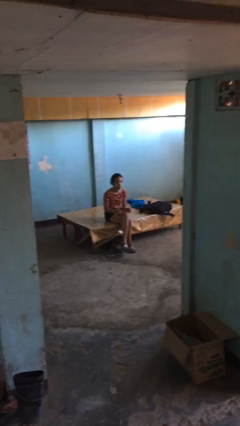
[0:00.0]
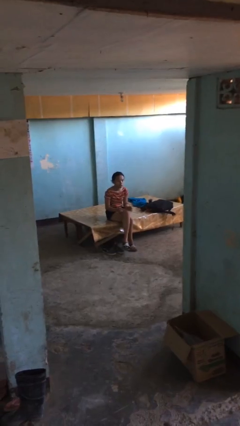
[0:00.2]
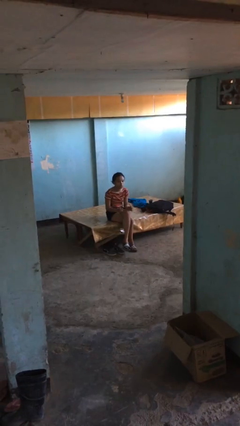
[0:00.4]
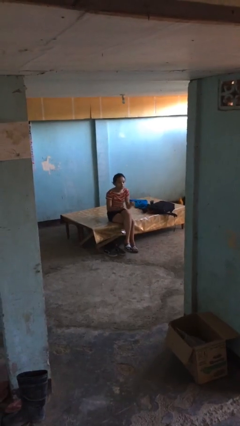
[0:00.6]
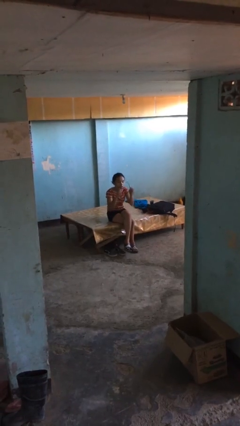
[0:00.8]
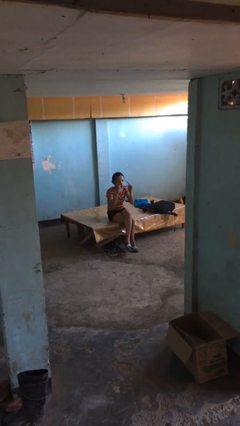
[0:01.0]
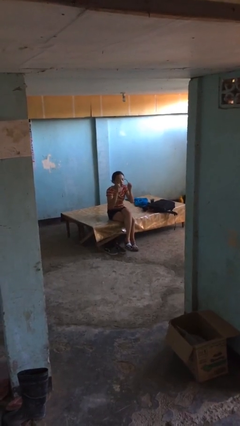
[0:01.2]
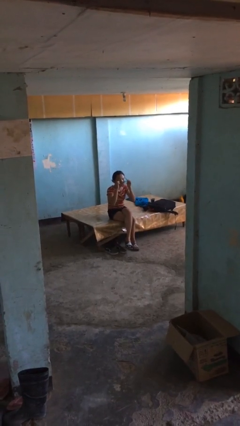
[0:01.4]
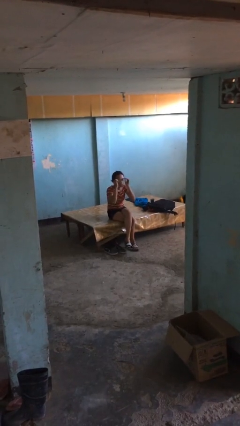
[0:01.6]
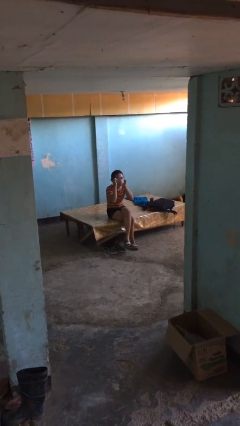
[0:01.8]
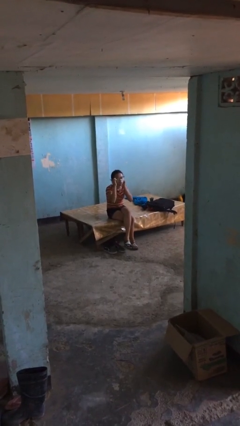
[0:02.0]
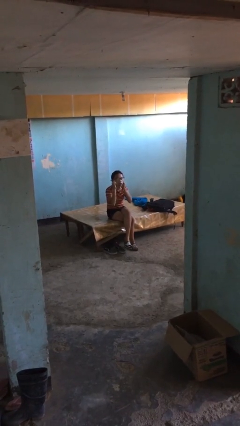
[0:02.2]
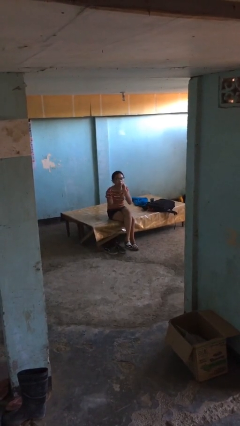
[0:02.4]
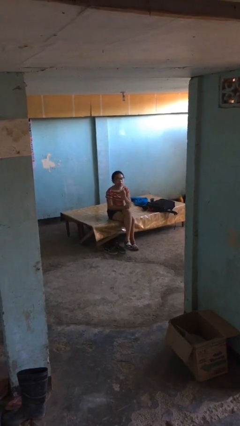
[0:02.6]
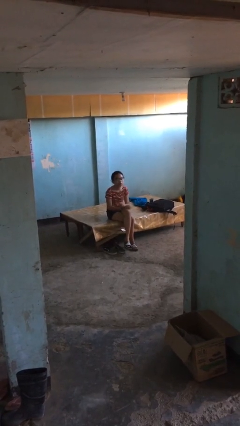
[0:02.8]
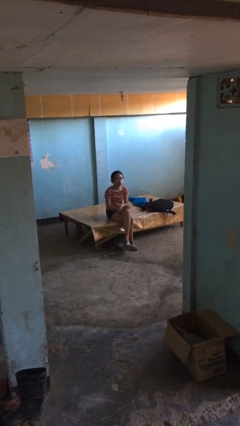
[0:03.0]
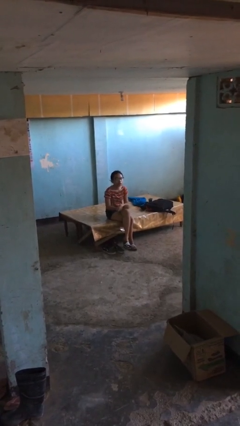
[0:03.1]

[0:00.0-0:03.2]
person puts on glasses

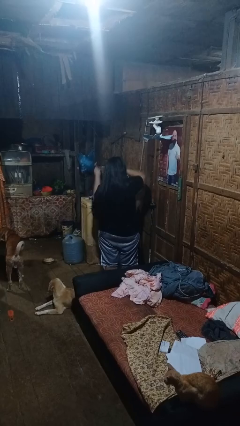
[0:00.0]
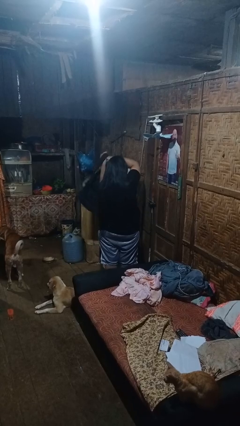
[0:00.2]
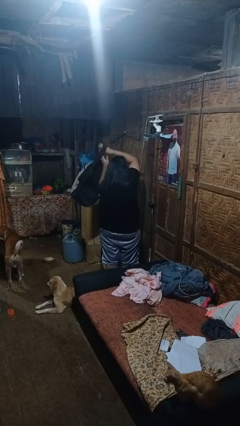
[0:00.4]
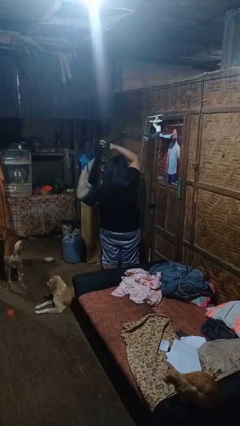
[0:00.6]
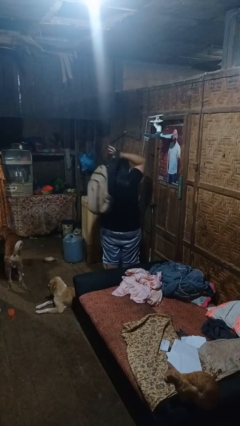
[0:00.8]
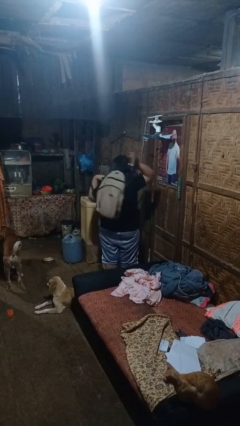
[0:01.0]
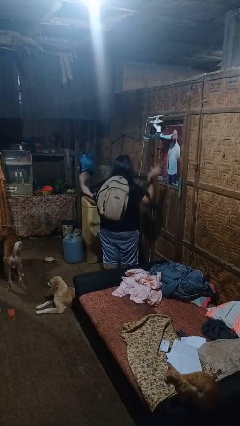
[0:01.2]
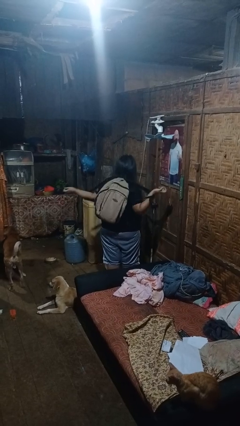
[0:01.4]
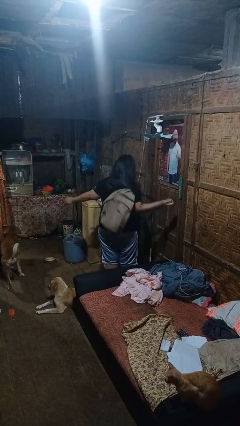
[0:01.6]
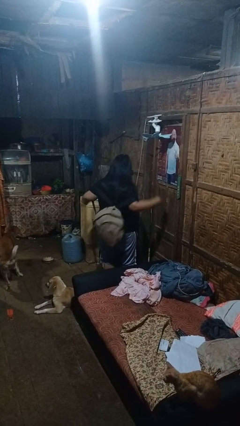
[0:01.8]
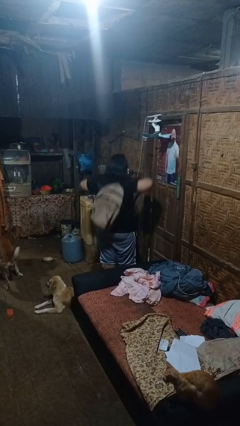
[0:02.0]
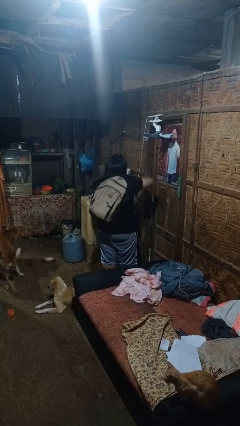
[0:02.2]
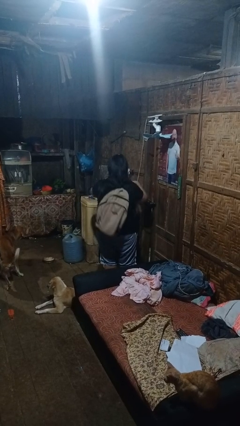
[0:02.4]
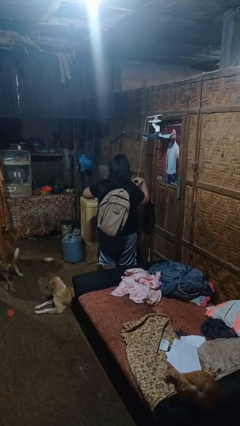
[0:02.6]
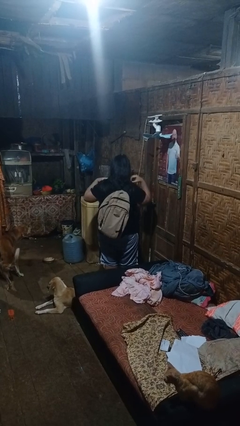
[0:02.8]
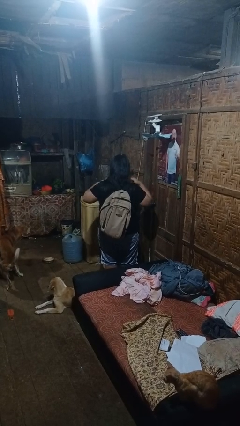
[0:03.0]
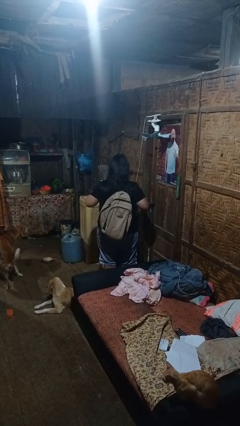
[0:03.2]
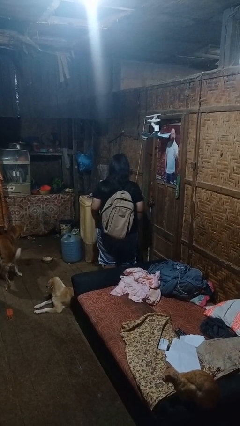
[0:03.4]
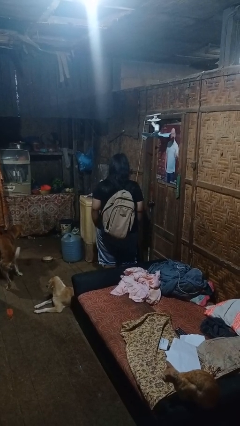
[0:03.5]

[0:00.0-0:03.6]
person puts on backpack

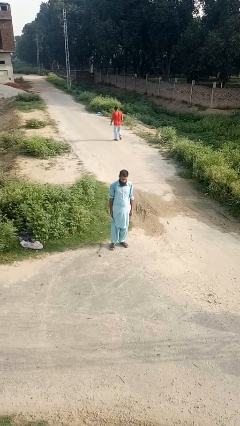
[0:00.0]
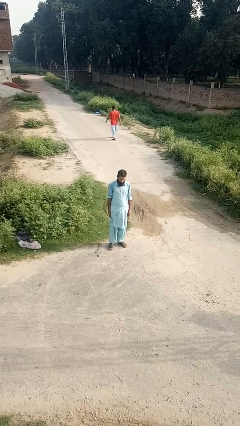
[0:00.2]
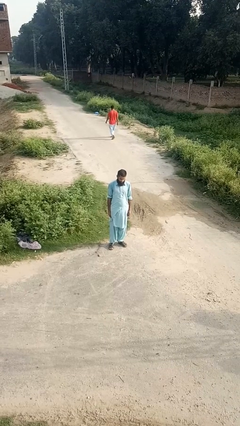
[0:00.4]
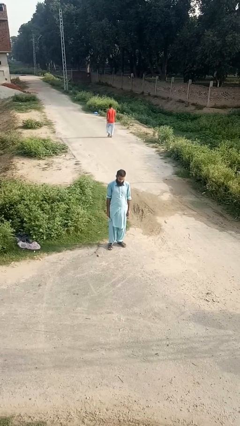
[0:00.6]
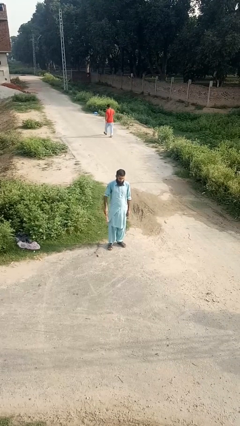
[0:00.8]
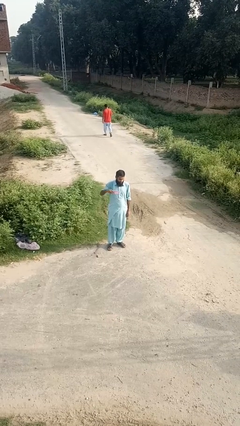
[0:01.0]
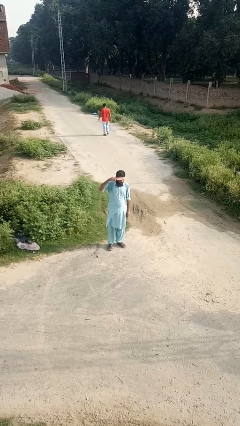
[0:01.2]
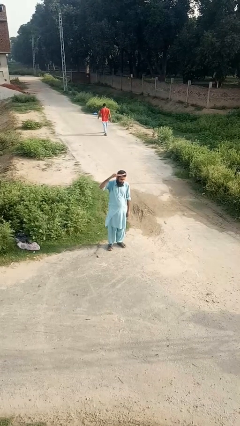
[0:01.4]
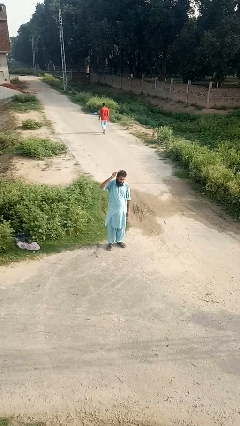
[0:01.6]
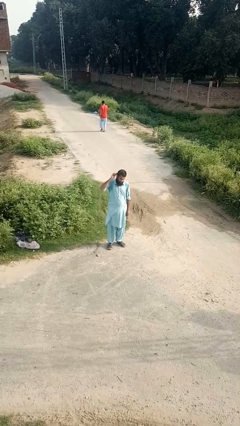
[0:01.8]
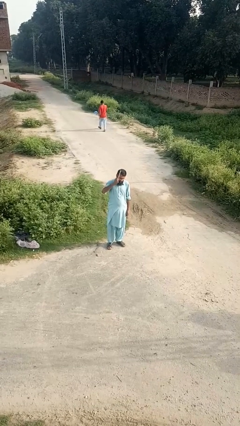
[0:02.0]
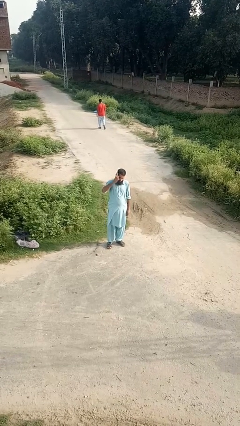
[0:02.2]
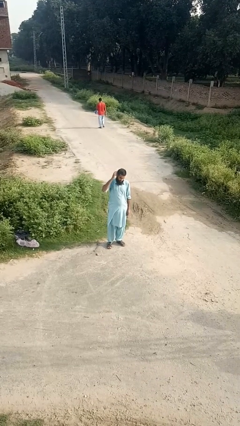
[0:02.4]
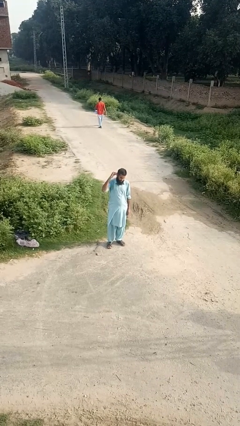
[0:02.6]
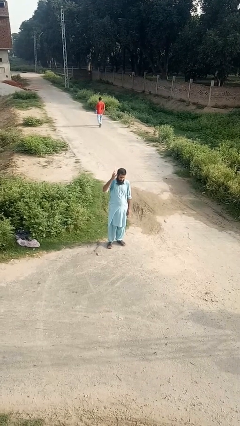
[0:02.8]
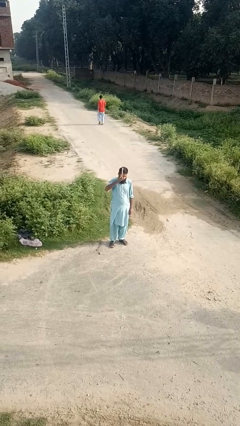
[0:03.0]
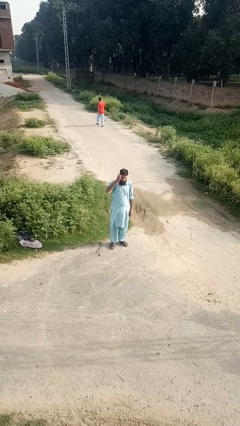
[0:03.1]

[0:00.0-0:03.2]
person brushes hair

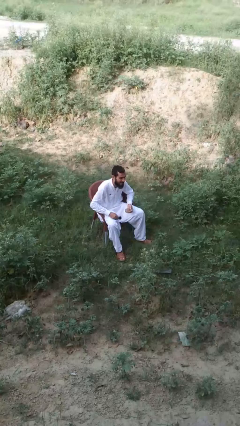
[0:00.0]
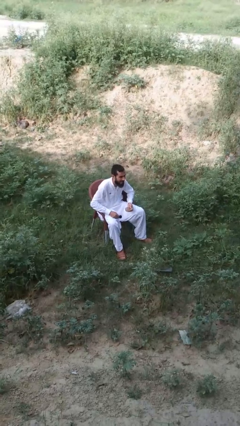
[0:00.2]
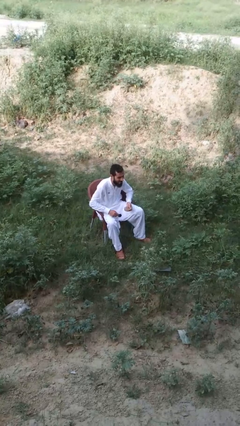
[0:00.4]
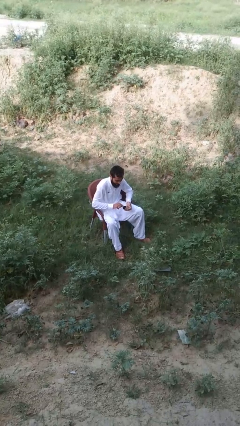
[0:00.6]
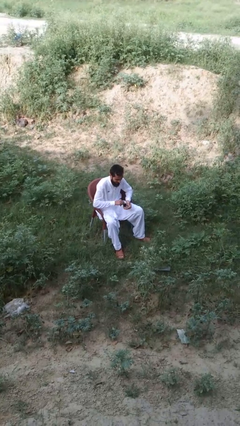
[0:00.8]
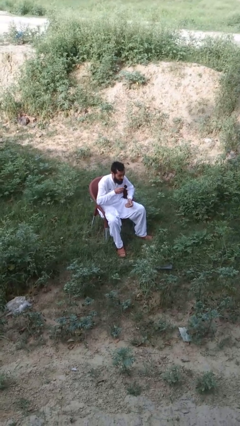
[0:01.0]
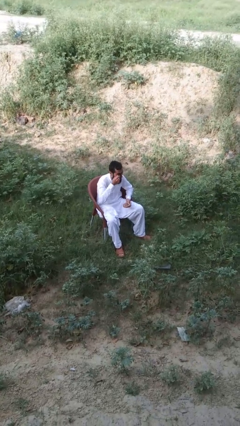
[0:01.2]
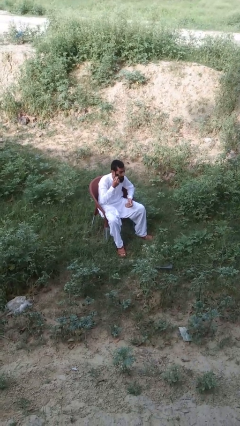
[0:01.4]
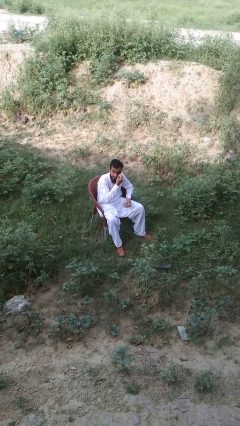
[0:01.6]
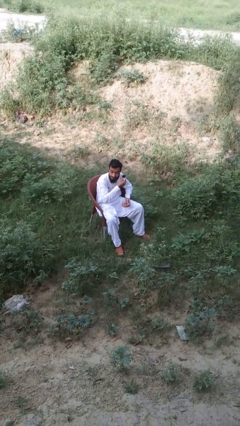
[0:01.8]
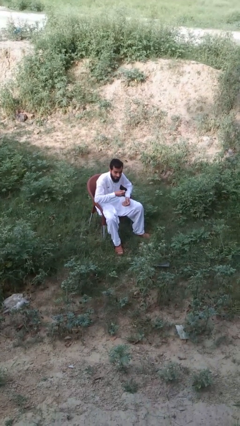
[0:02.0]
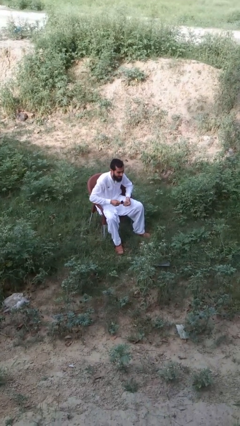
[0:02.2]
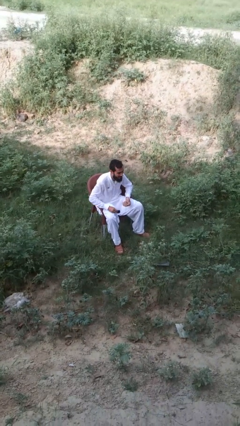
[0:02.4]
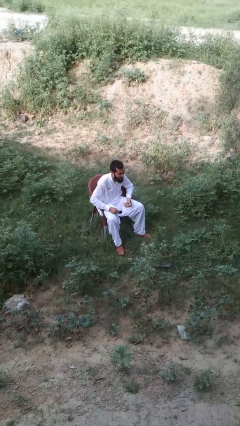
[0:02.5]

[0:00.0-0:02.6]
person shades eyes

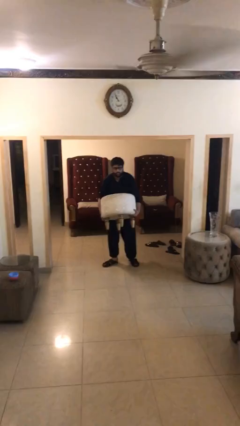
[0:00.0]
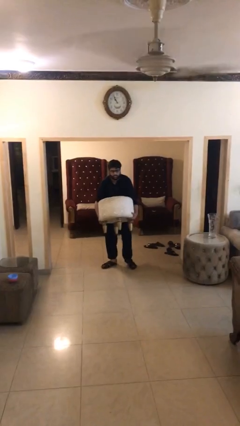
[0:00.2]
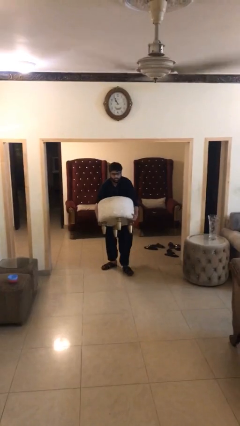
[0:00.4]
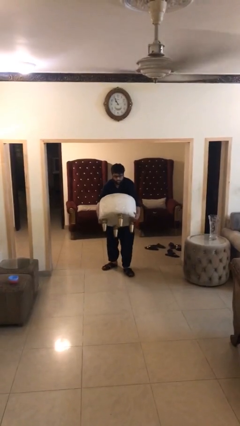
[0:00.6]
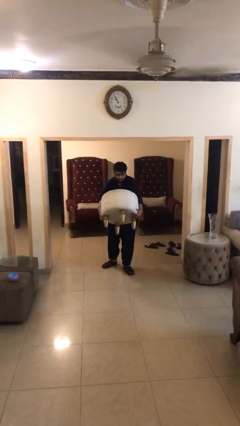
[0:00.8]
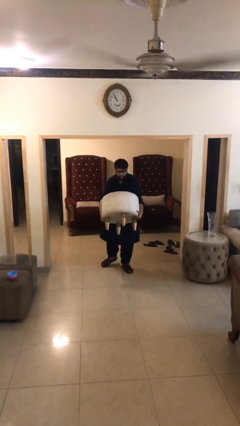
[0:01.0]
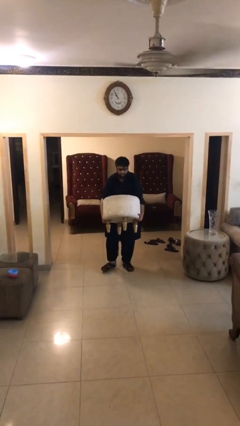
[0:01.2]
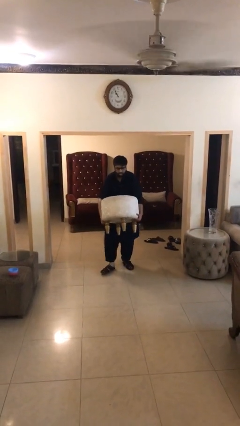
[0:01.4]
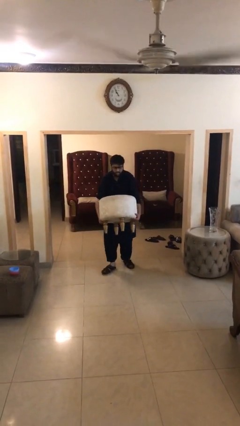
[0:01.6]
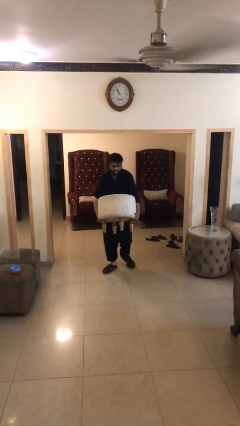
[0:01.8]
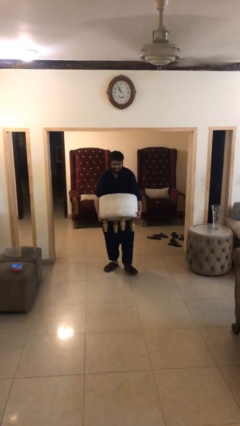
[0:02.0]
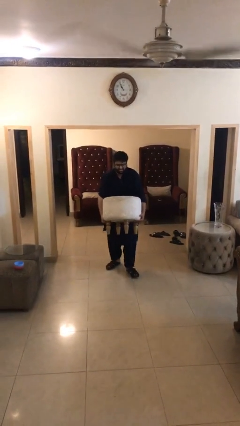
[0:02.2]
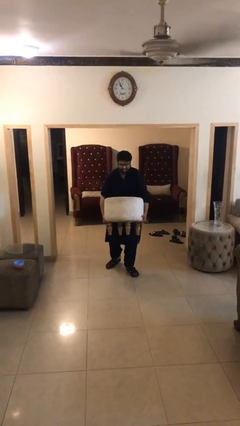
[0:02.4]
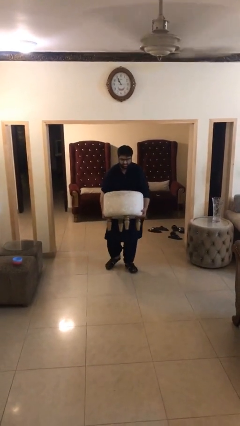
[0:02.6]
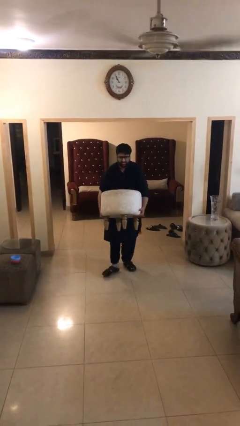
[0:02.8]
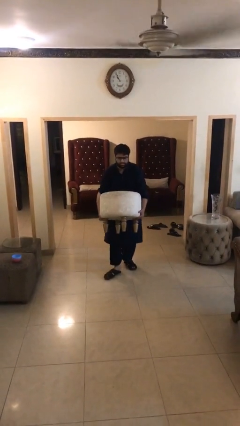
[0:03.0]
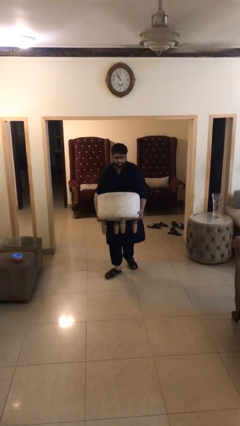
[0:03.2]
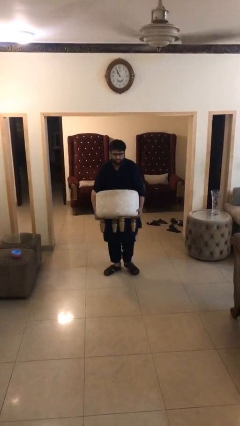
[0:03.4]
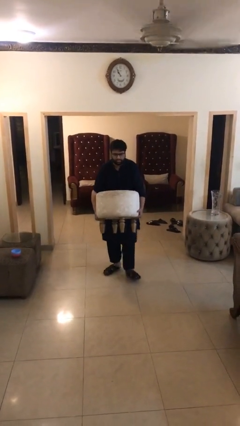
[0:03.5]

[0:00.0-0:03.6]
person carries heavy object

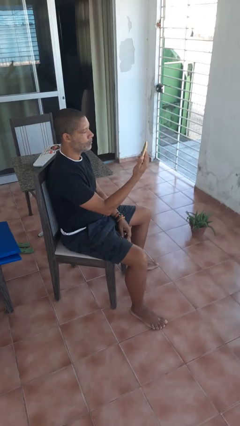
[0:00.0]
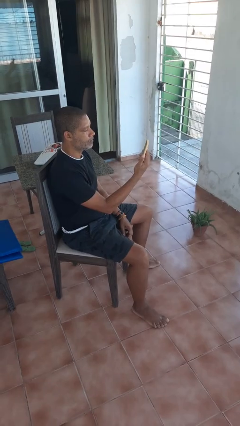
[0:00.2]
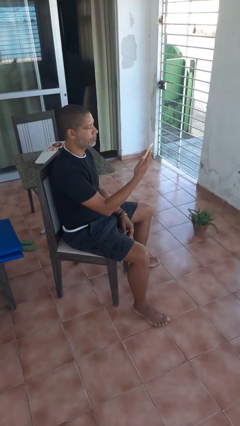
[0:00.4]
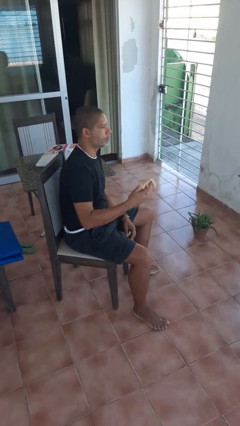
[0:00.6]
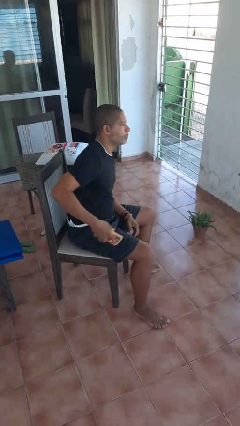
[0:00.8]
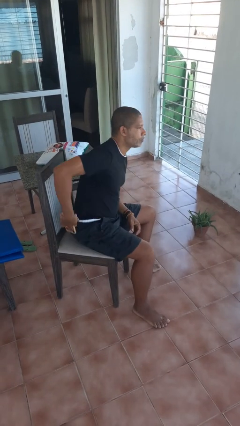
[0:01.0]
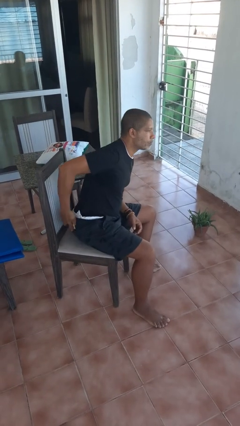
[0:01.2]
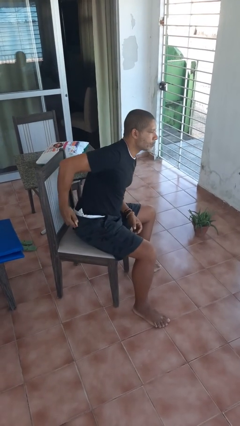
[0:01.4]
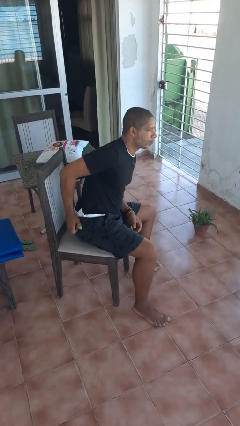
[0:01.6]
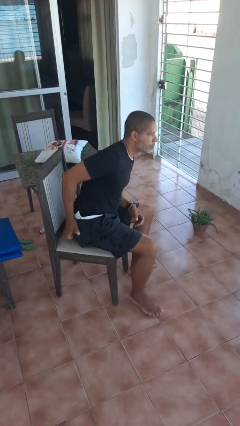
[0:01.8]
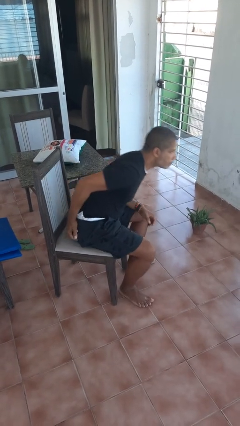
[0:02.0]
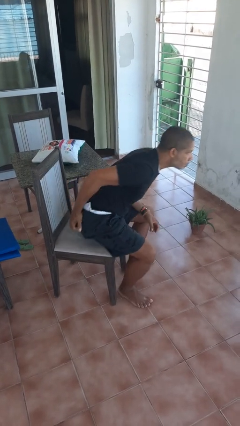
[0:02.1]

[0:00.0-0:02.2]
person puts phone into pocket
